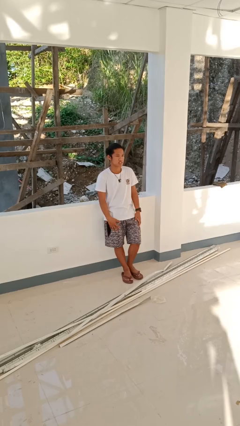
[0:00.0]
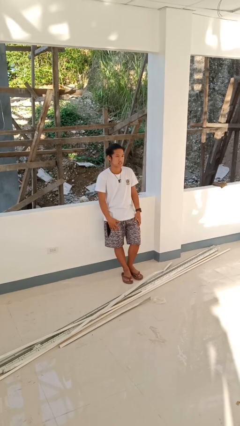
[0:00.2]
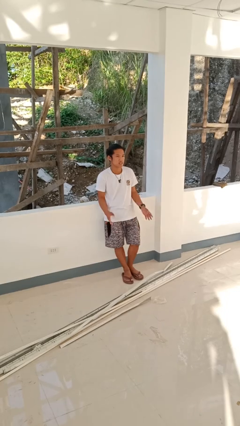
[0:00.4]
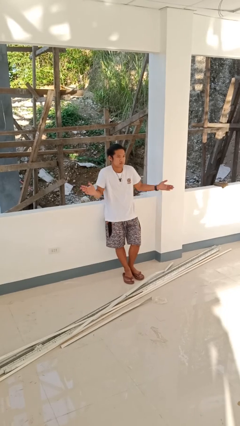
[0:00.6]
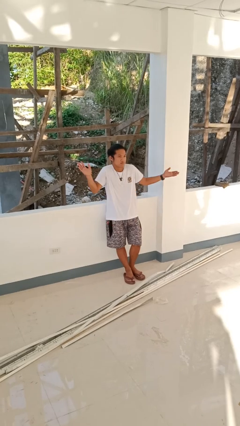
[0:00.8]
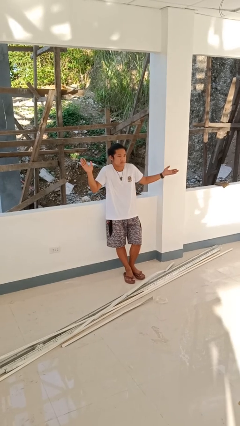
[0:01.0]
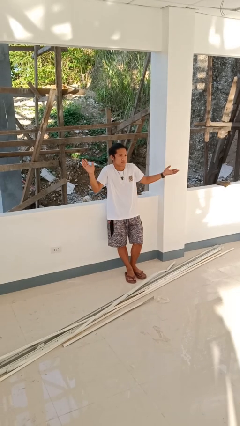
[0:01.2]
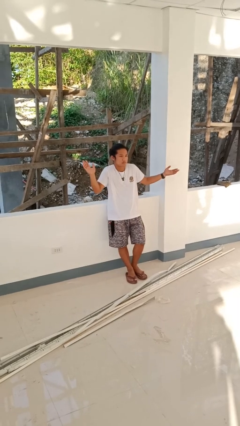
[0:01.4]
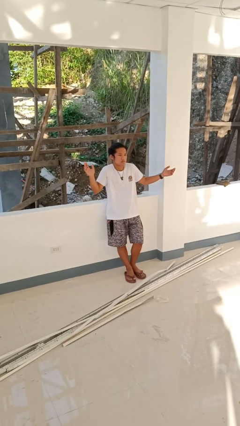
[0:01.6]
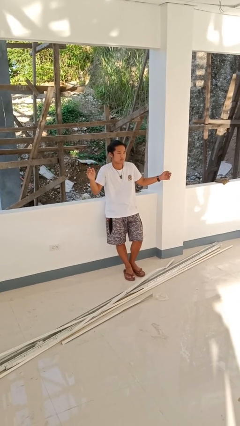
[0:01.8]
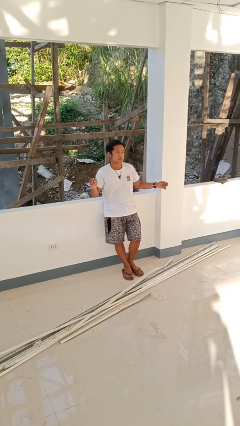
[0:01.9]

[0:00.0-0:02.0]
person shrugs

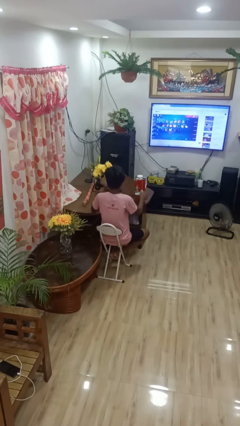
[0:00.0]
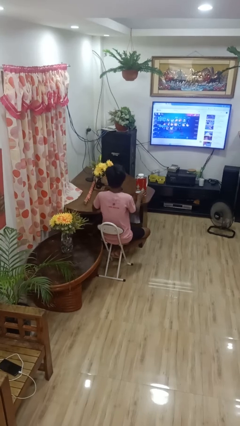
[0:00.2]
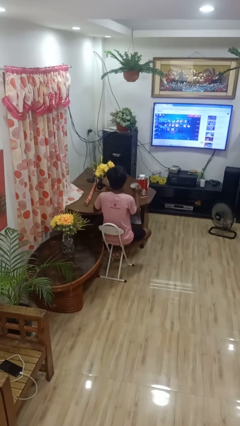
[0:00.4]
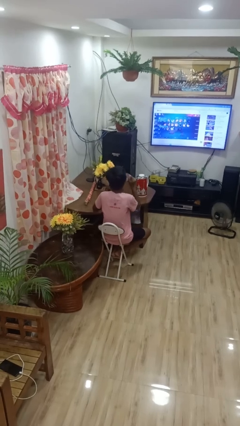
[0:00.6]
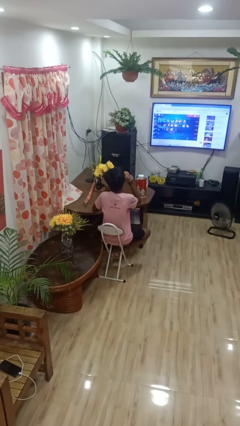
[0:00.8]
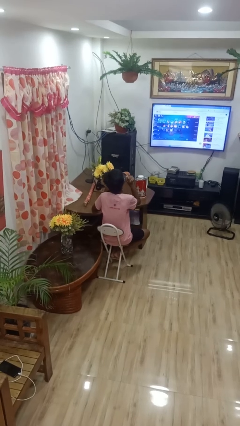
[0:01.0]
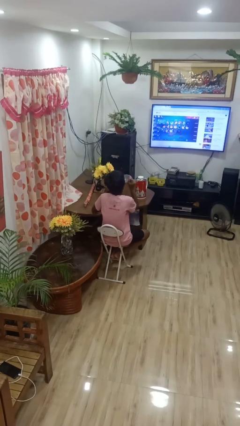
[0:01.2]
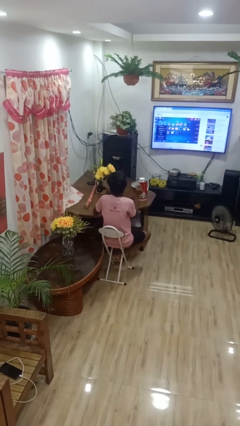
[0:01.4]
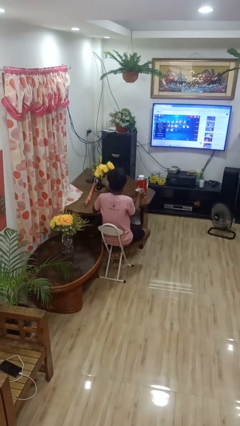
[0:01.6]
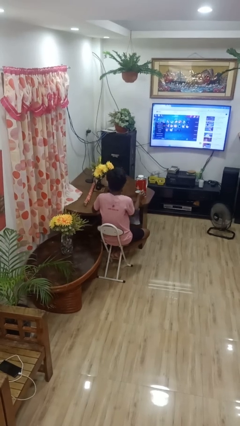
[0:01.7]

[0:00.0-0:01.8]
person drinks from mug

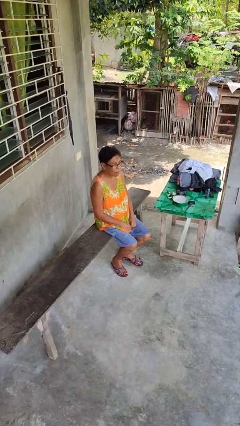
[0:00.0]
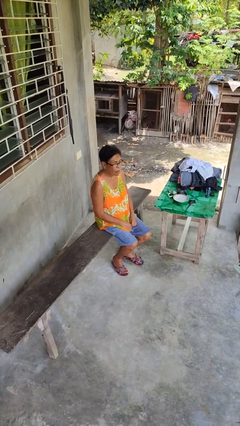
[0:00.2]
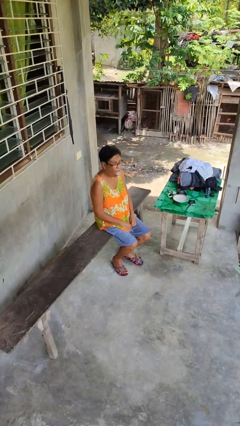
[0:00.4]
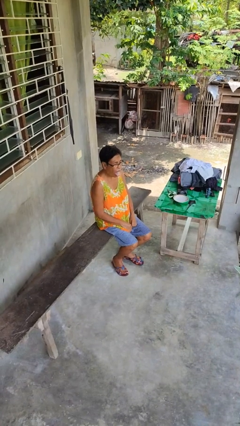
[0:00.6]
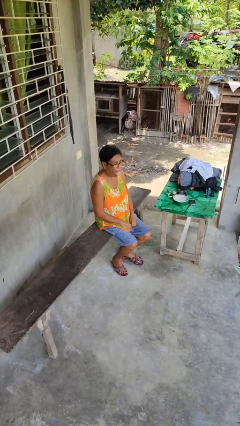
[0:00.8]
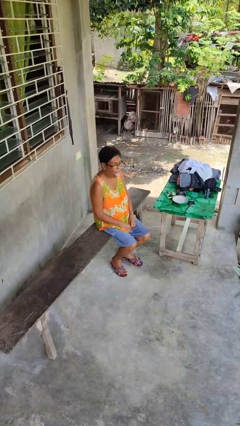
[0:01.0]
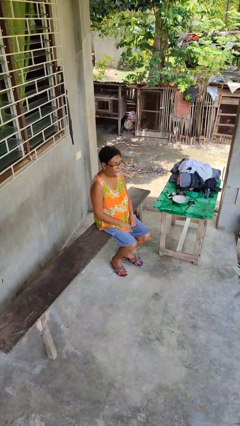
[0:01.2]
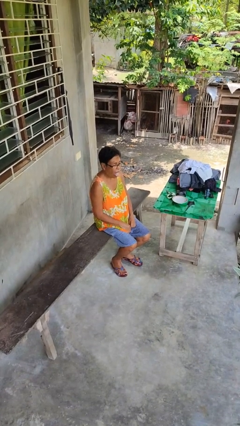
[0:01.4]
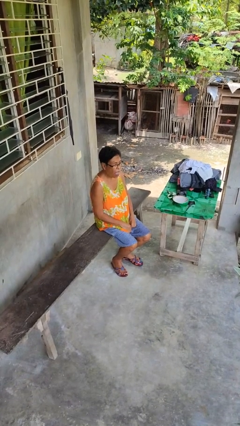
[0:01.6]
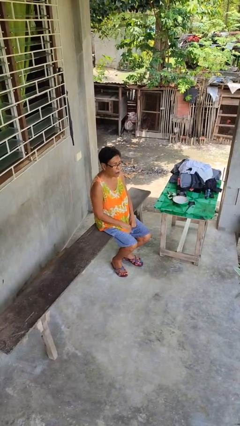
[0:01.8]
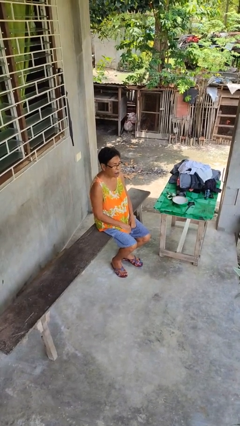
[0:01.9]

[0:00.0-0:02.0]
person sticks out tongue

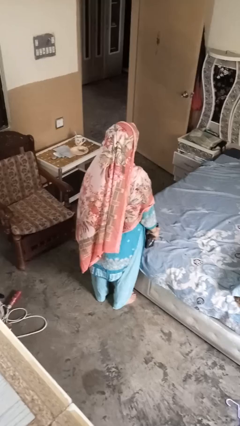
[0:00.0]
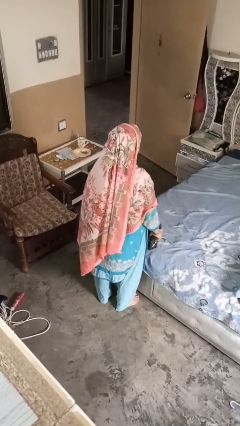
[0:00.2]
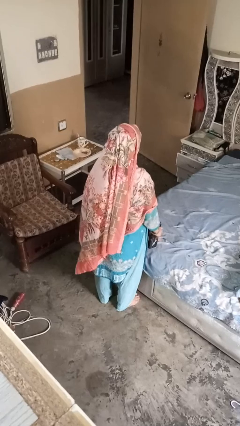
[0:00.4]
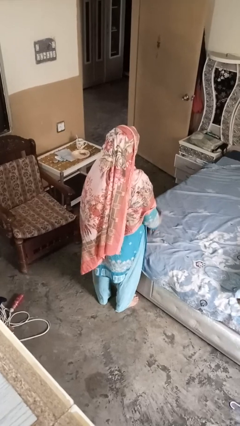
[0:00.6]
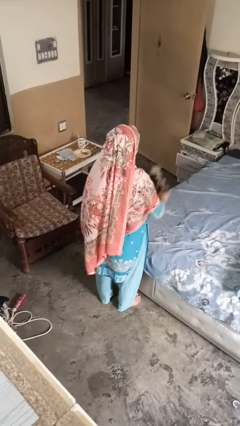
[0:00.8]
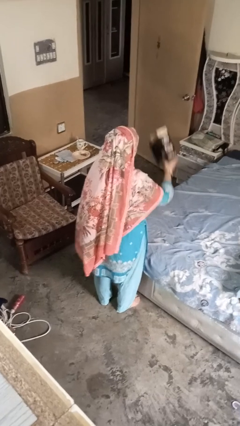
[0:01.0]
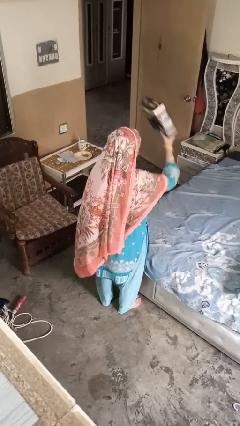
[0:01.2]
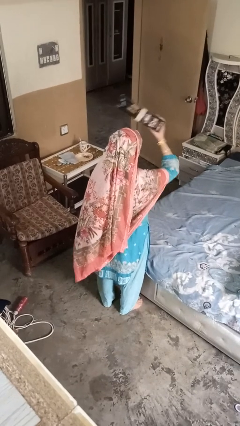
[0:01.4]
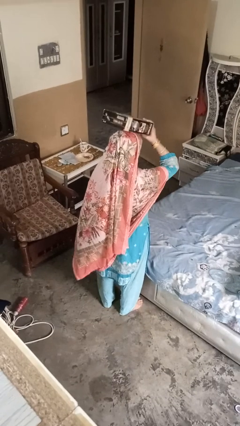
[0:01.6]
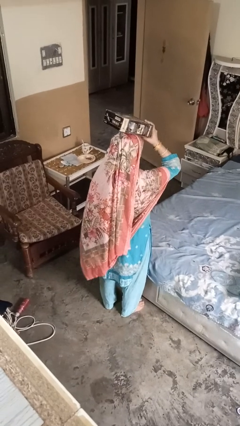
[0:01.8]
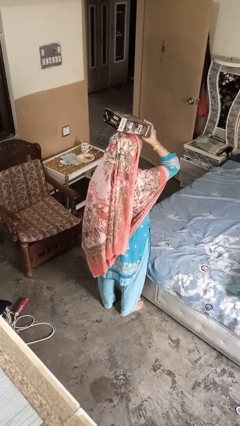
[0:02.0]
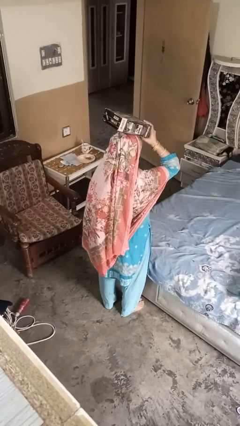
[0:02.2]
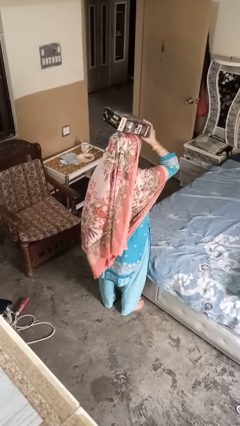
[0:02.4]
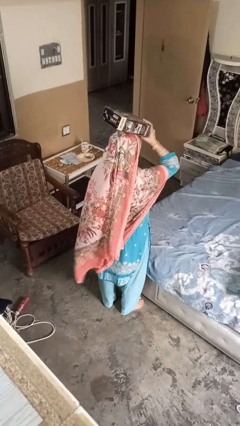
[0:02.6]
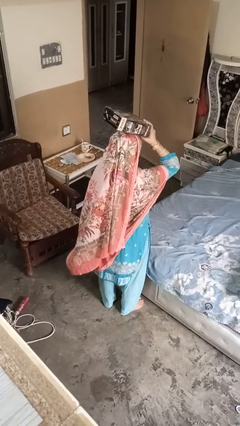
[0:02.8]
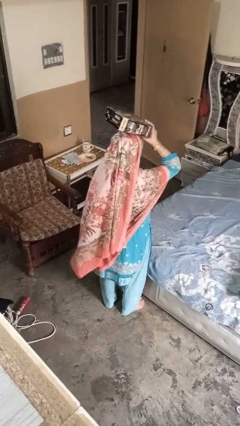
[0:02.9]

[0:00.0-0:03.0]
person holds object above head

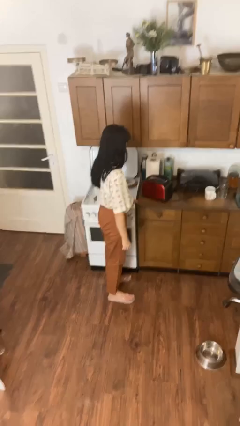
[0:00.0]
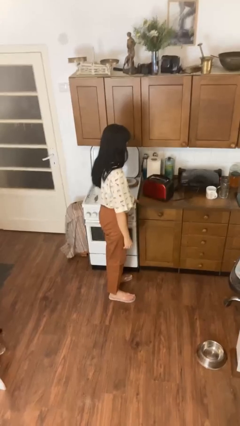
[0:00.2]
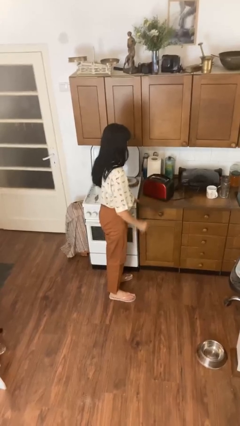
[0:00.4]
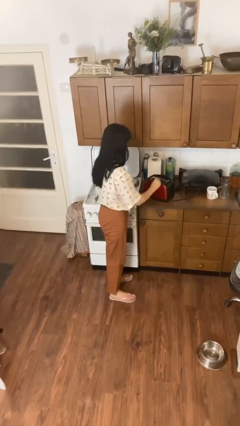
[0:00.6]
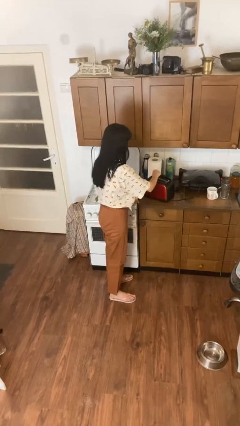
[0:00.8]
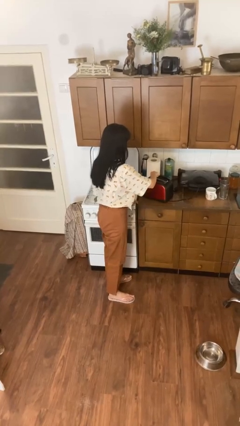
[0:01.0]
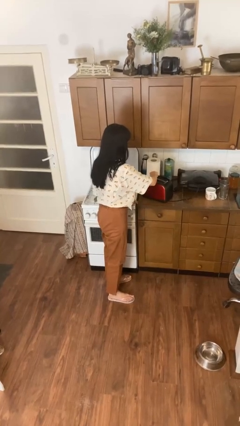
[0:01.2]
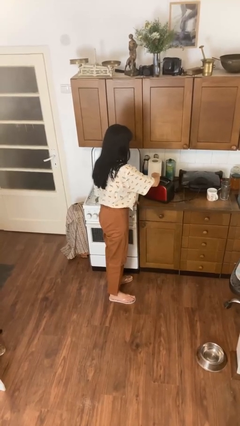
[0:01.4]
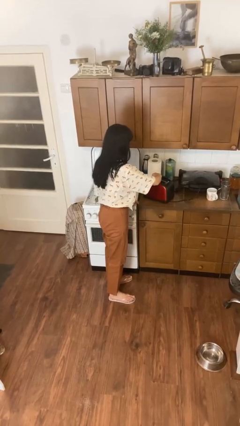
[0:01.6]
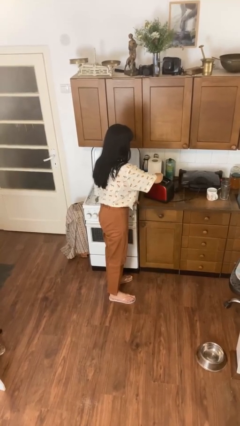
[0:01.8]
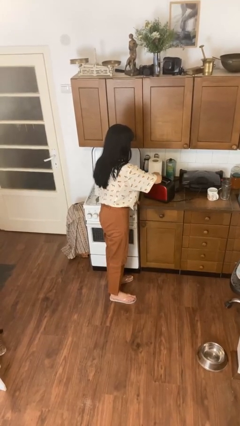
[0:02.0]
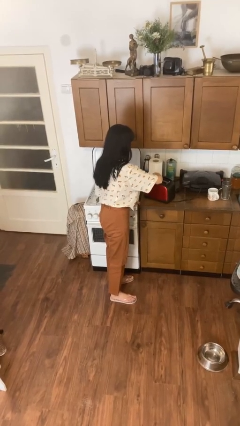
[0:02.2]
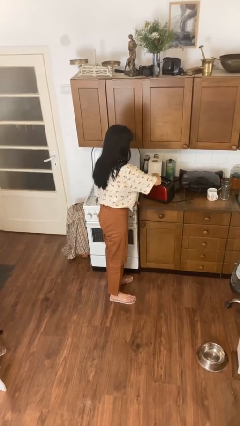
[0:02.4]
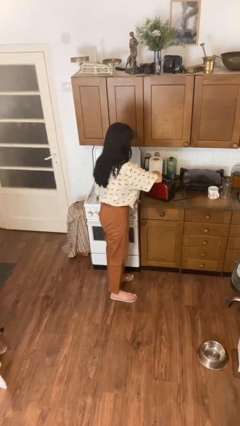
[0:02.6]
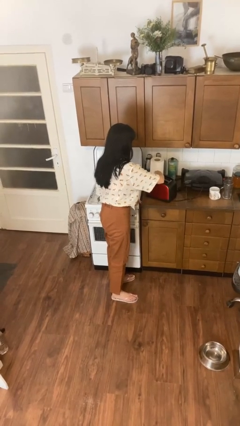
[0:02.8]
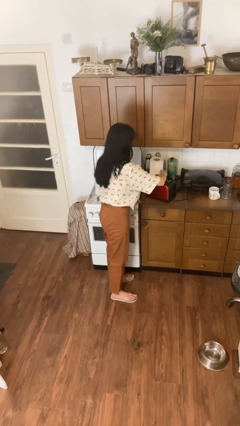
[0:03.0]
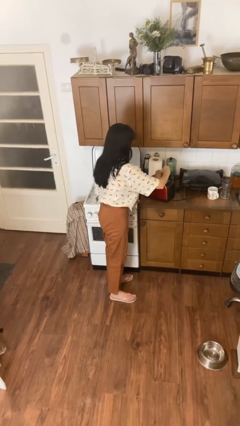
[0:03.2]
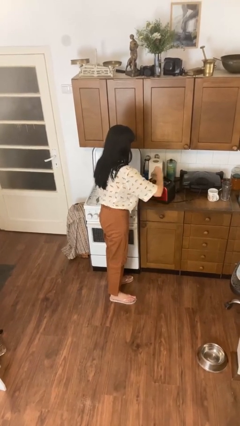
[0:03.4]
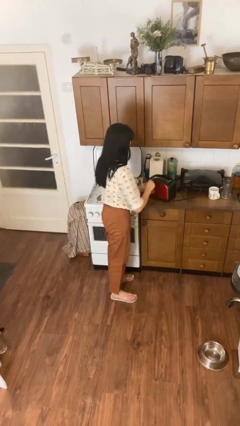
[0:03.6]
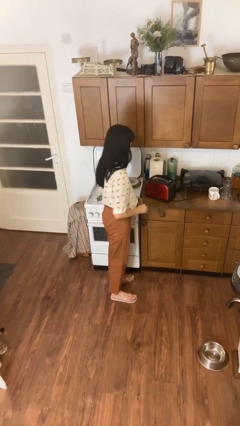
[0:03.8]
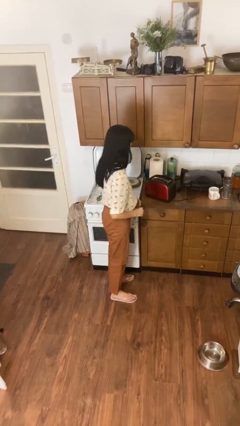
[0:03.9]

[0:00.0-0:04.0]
person takes object from toaster

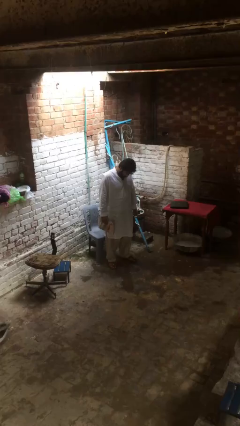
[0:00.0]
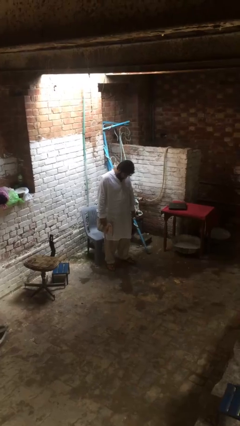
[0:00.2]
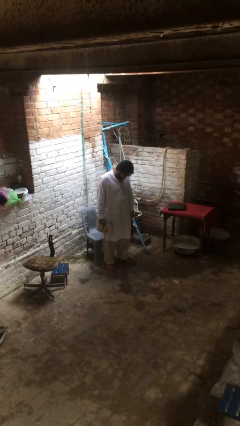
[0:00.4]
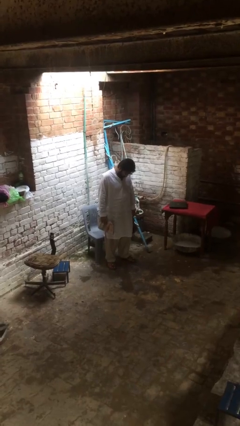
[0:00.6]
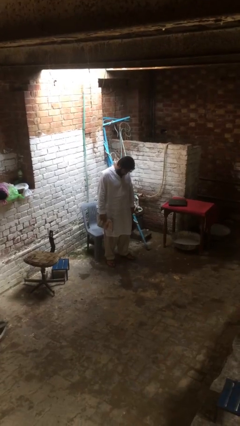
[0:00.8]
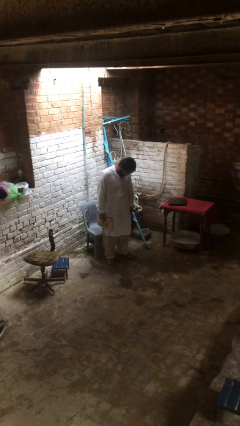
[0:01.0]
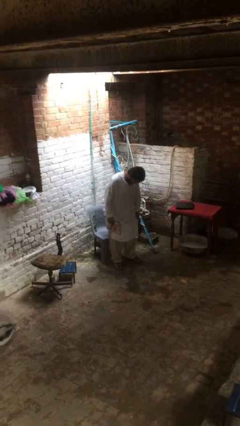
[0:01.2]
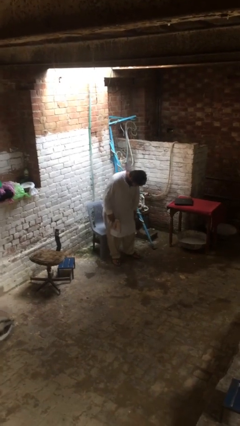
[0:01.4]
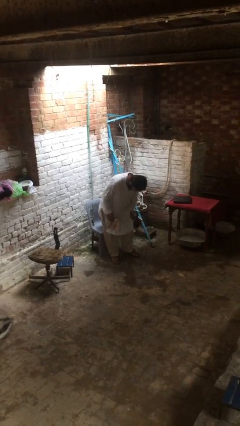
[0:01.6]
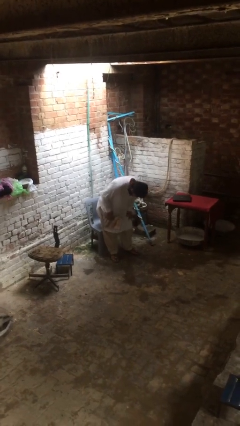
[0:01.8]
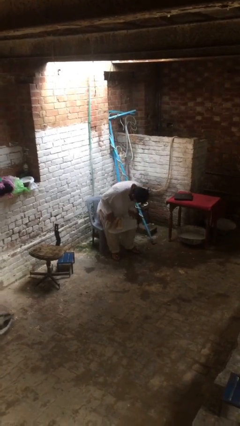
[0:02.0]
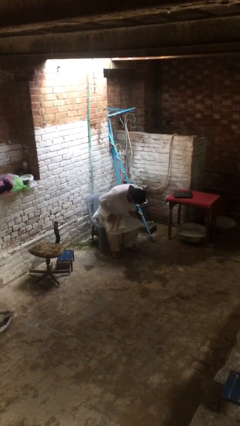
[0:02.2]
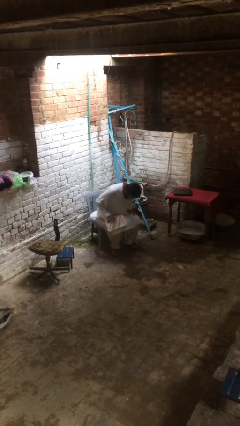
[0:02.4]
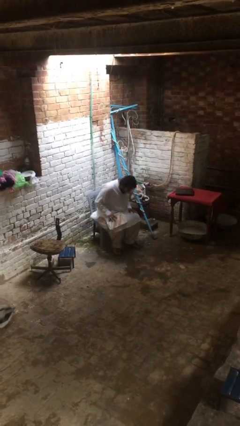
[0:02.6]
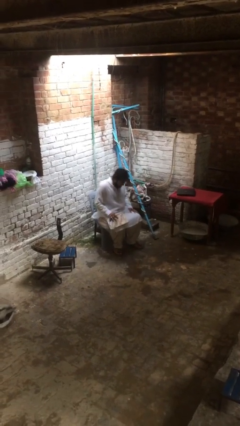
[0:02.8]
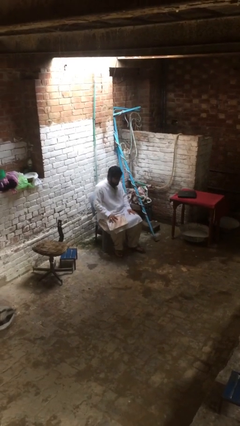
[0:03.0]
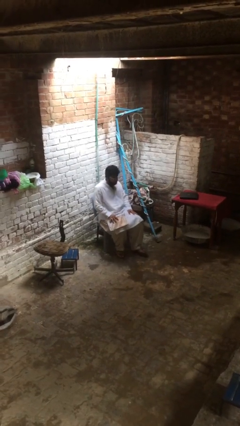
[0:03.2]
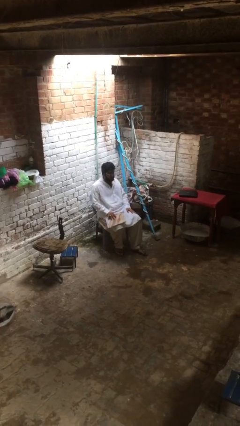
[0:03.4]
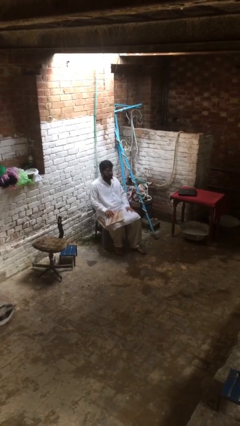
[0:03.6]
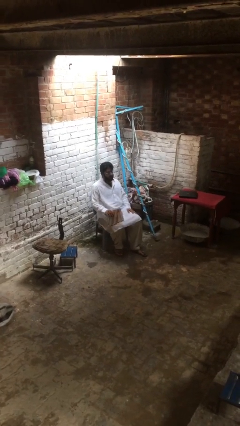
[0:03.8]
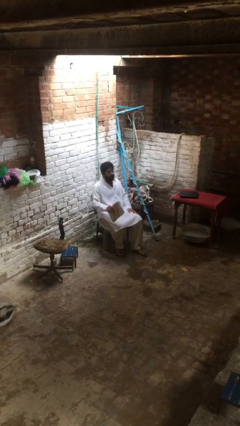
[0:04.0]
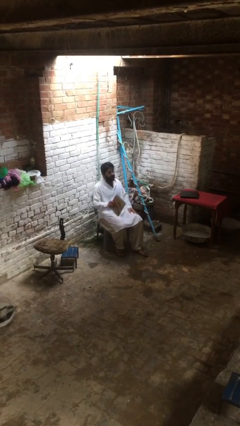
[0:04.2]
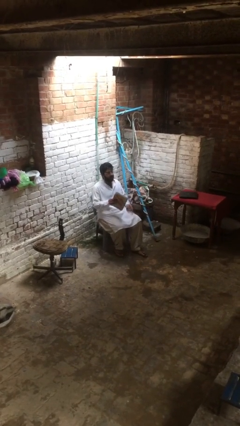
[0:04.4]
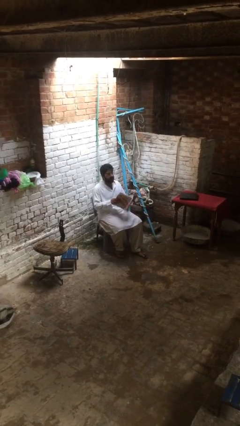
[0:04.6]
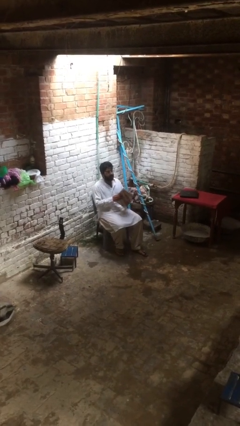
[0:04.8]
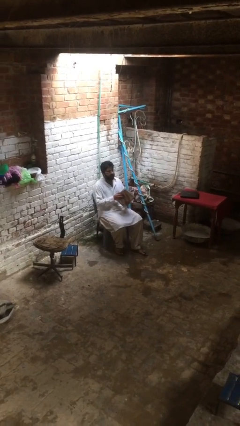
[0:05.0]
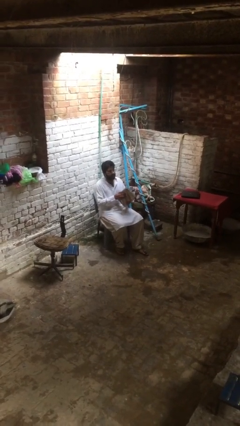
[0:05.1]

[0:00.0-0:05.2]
person sits down
